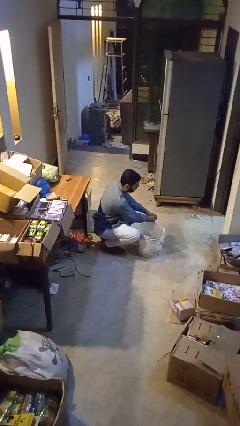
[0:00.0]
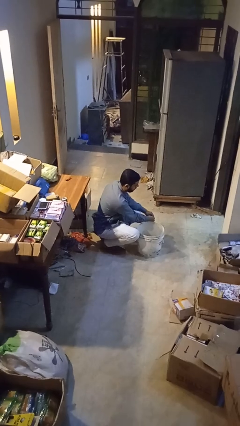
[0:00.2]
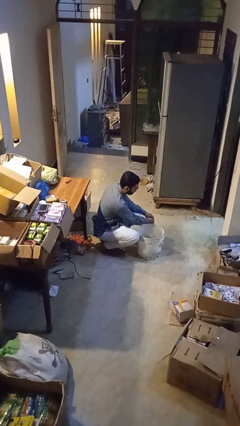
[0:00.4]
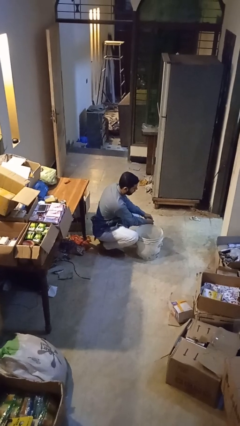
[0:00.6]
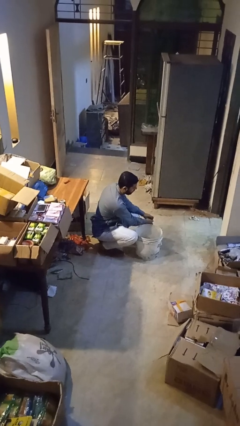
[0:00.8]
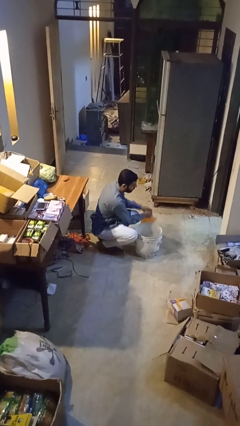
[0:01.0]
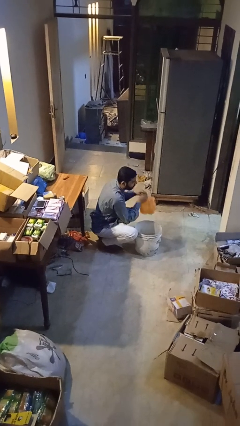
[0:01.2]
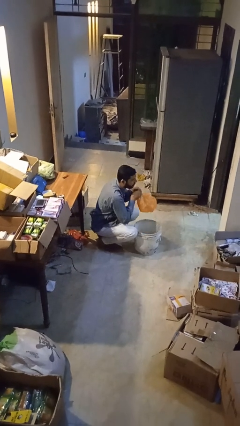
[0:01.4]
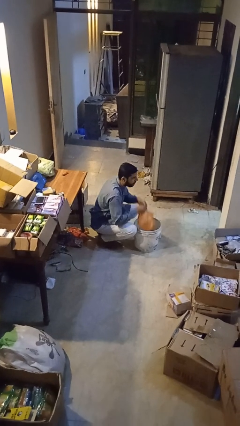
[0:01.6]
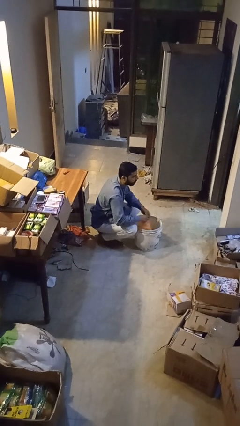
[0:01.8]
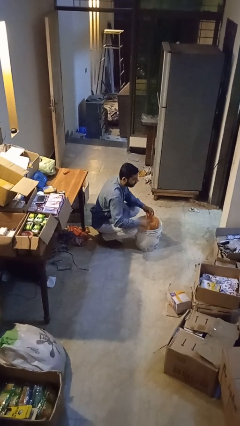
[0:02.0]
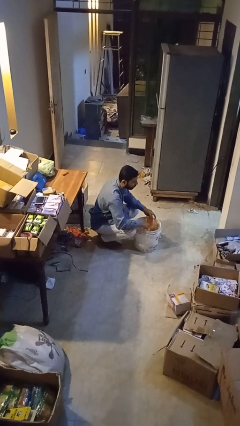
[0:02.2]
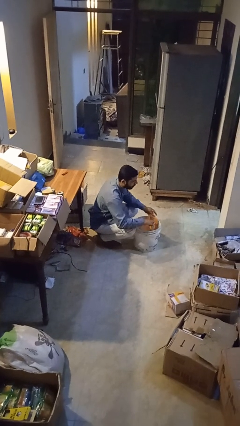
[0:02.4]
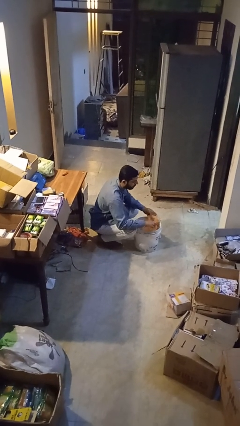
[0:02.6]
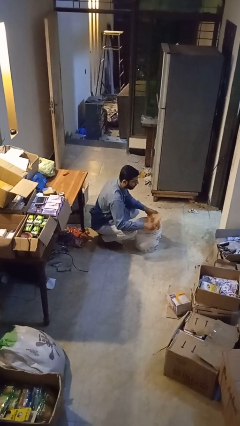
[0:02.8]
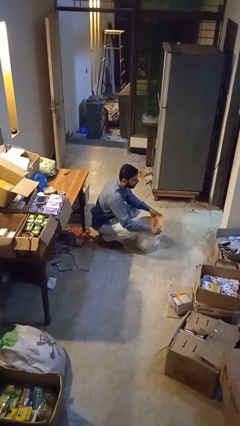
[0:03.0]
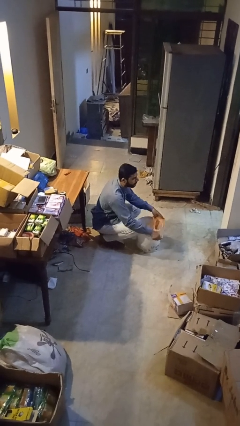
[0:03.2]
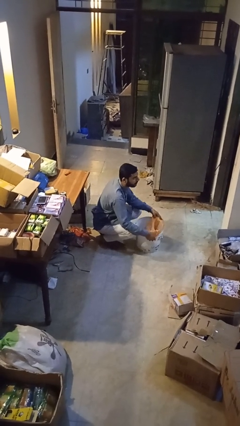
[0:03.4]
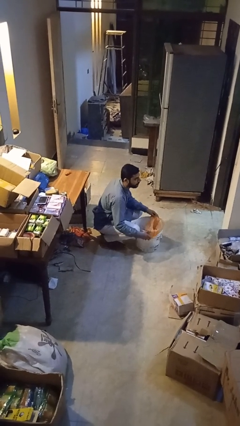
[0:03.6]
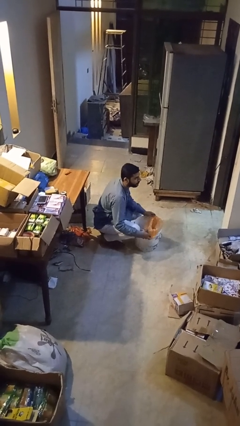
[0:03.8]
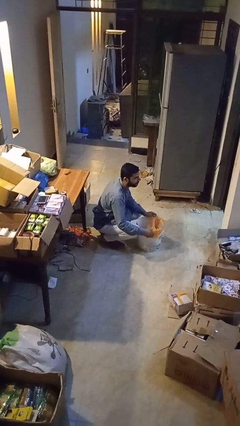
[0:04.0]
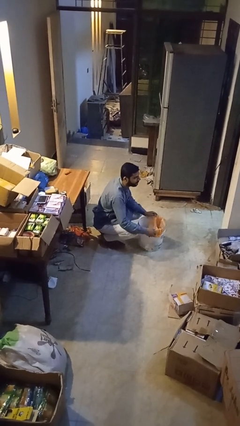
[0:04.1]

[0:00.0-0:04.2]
person inserts trashbag into trashcan

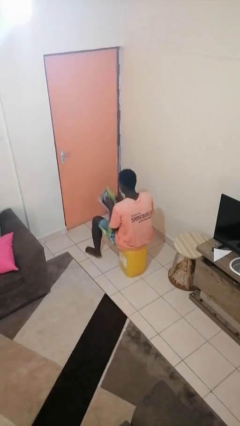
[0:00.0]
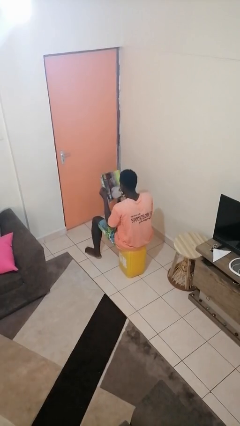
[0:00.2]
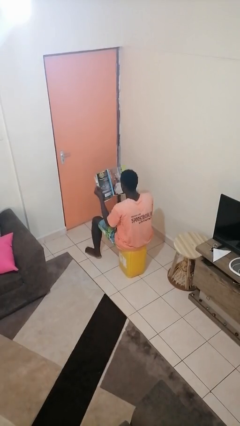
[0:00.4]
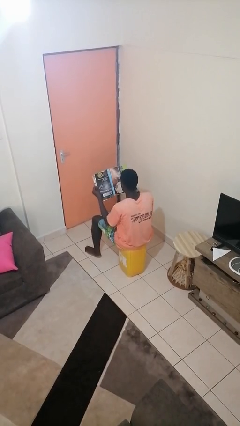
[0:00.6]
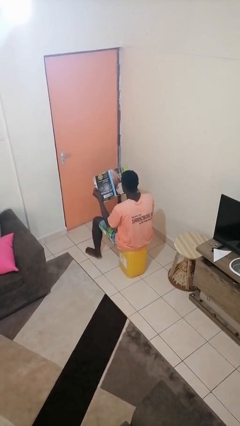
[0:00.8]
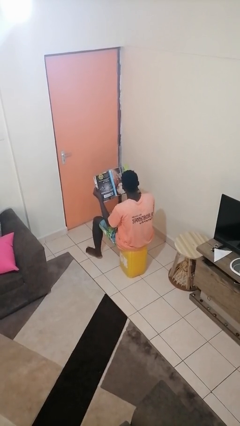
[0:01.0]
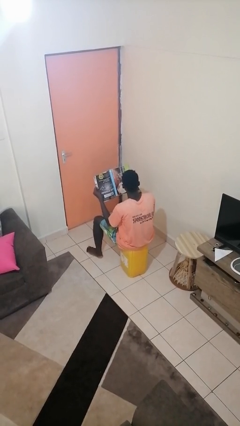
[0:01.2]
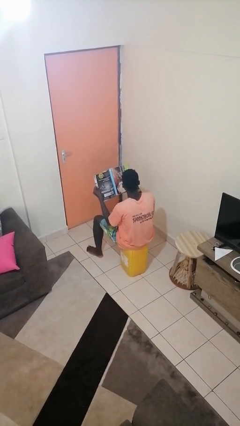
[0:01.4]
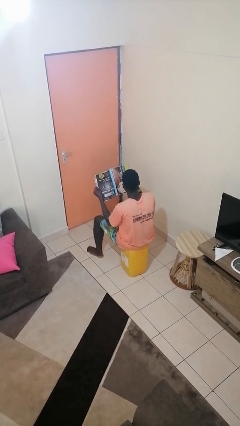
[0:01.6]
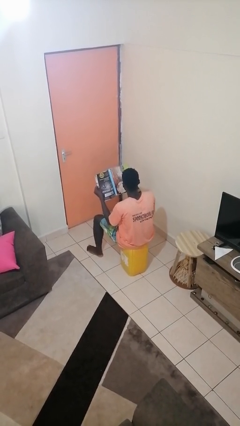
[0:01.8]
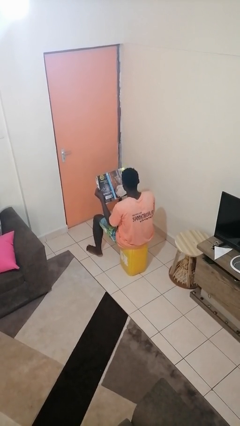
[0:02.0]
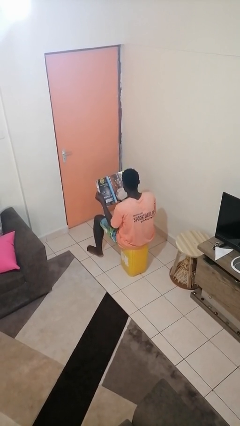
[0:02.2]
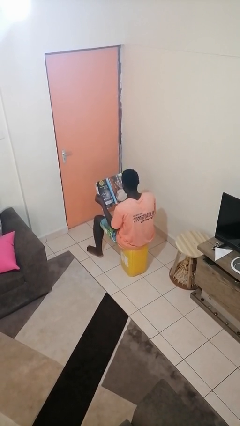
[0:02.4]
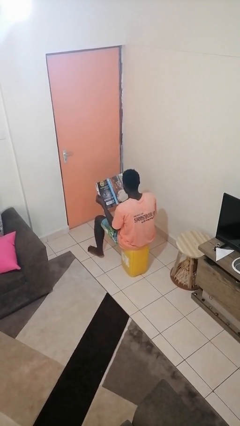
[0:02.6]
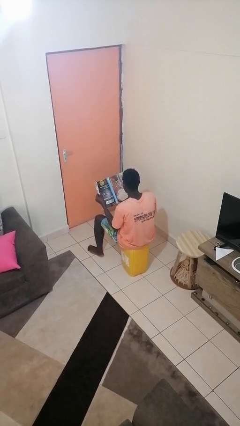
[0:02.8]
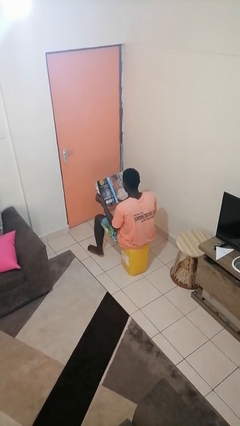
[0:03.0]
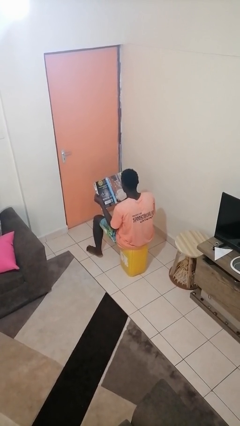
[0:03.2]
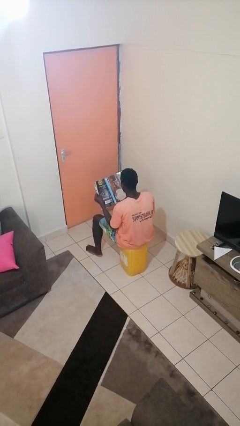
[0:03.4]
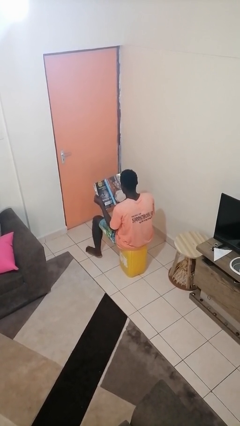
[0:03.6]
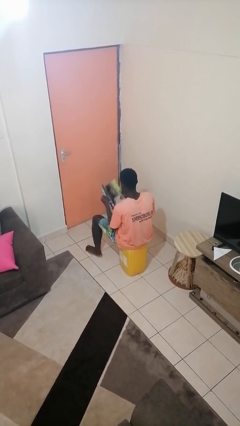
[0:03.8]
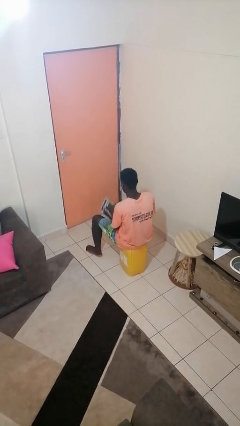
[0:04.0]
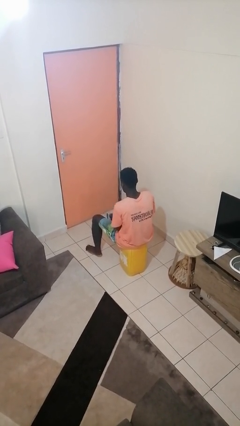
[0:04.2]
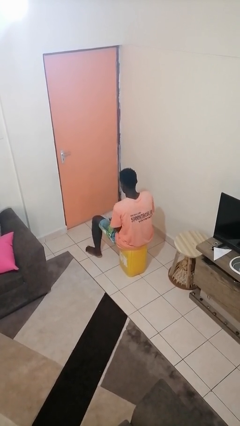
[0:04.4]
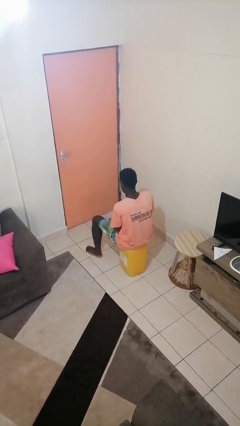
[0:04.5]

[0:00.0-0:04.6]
person reads magazine

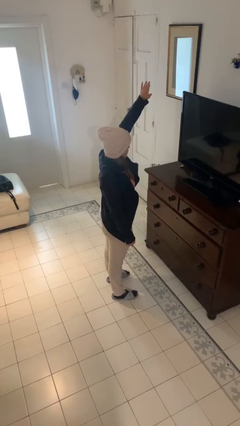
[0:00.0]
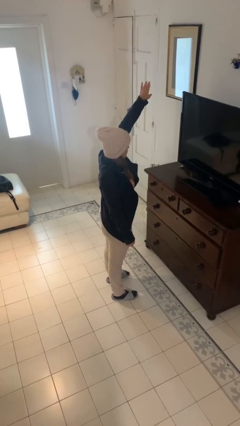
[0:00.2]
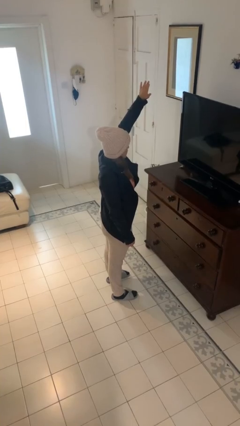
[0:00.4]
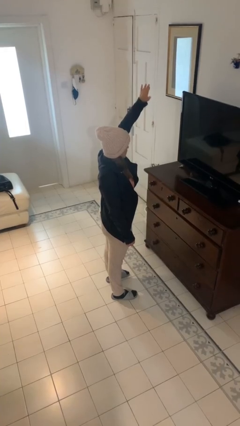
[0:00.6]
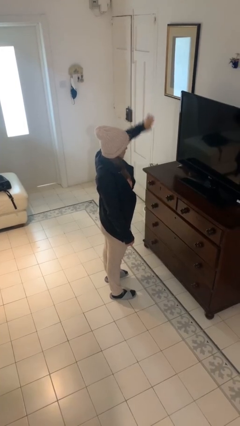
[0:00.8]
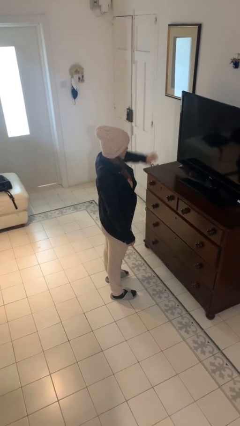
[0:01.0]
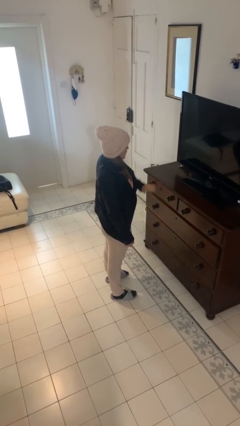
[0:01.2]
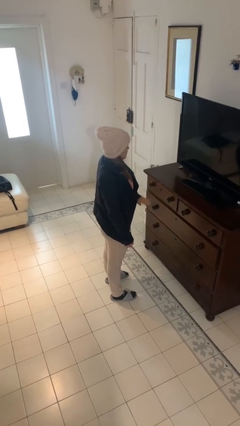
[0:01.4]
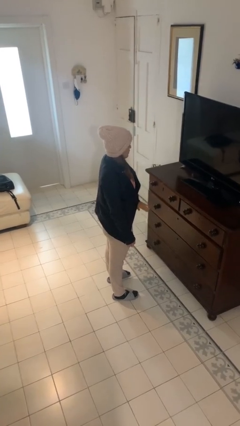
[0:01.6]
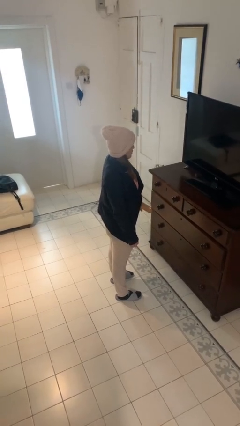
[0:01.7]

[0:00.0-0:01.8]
person gestures swipe down

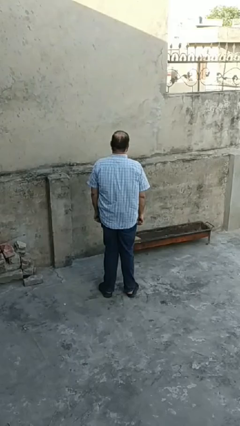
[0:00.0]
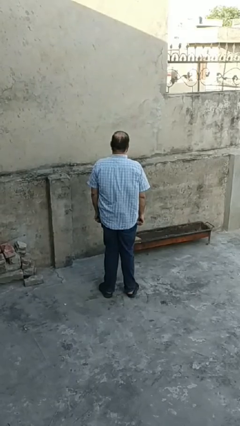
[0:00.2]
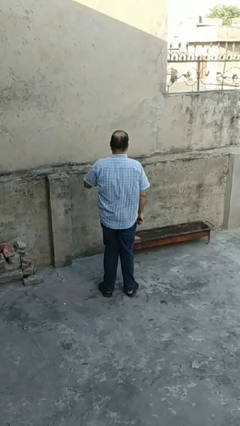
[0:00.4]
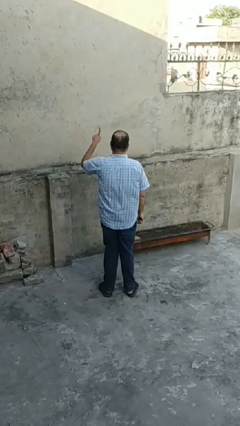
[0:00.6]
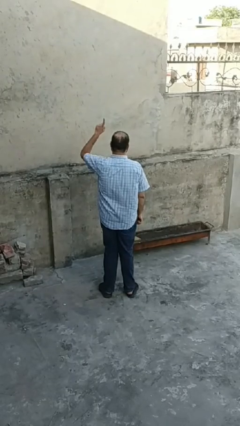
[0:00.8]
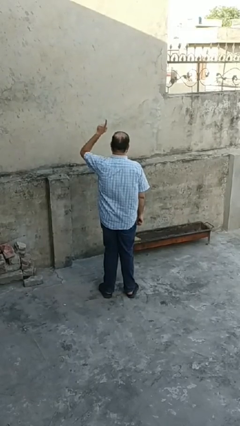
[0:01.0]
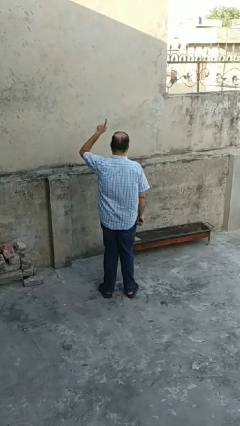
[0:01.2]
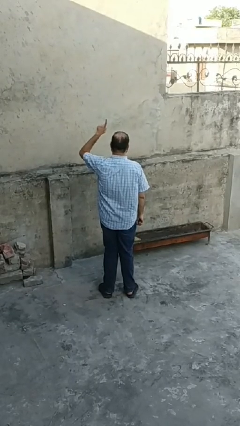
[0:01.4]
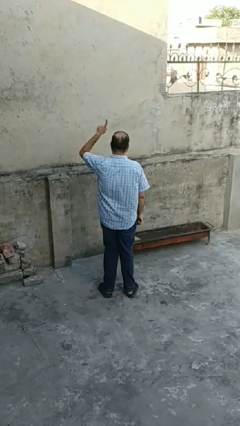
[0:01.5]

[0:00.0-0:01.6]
person gestures number one

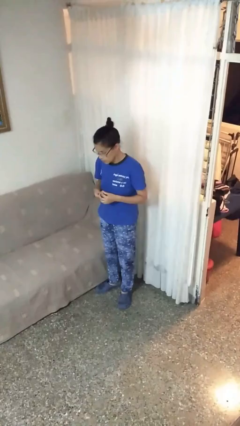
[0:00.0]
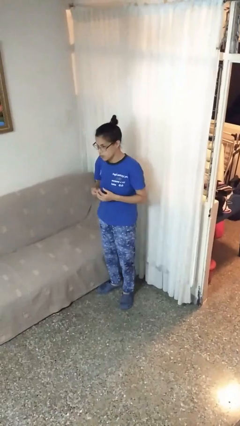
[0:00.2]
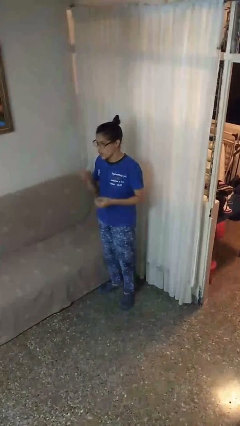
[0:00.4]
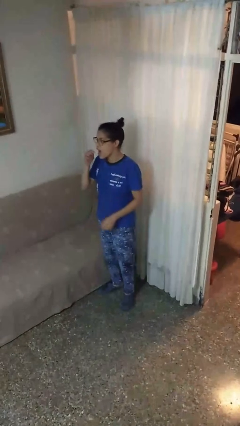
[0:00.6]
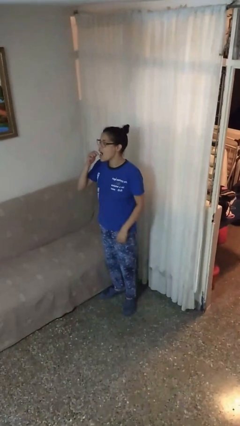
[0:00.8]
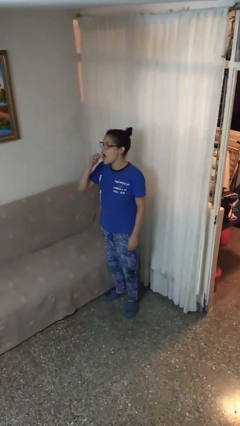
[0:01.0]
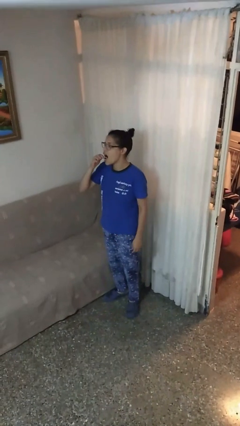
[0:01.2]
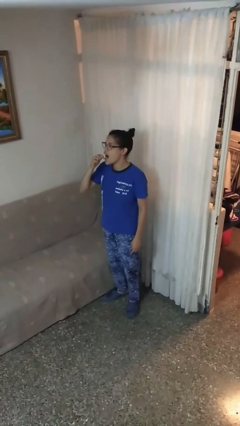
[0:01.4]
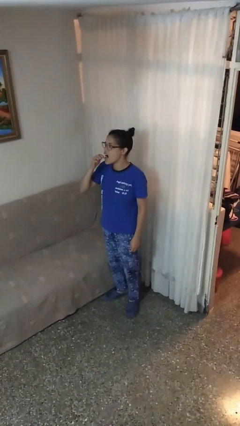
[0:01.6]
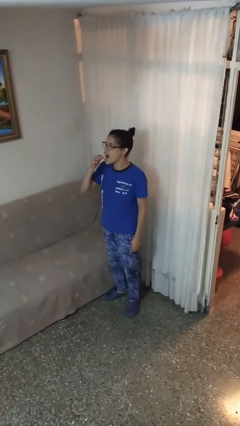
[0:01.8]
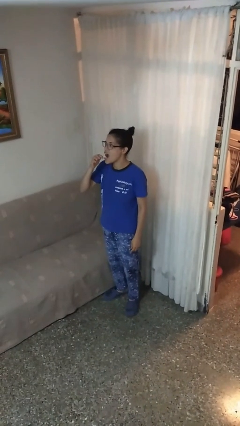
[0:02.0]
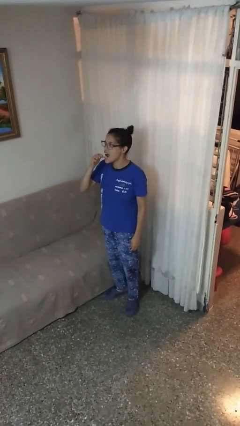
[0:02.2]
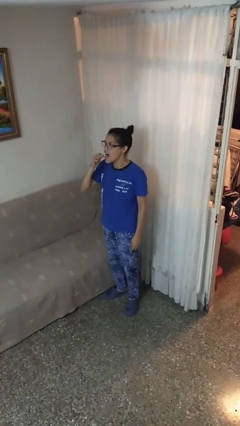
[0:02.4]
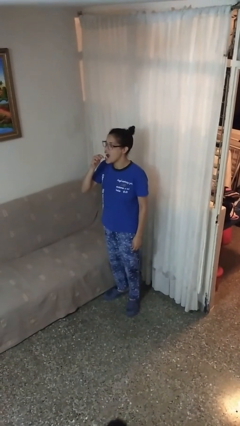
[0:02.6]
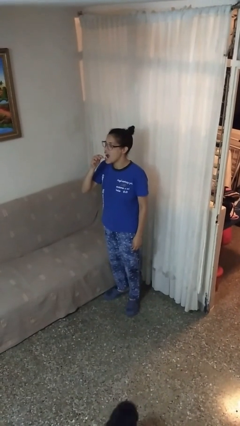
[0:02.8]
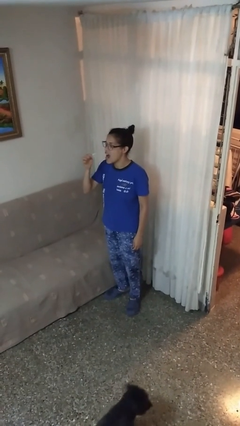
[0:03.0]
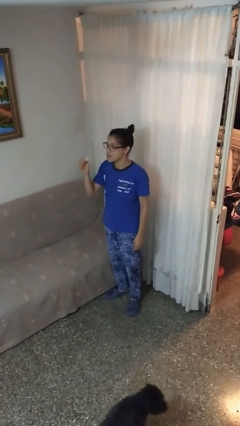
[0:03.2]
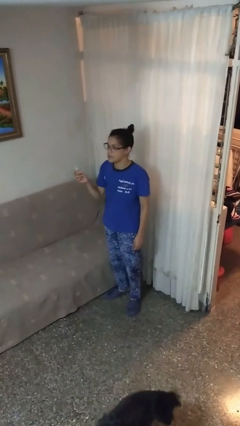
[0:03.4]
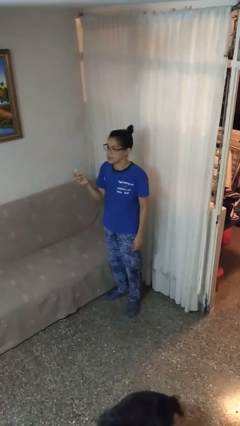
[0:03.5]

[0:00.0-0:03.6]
person flosses

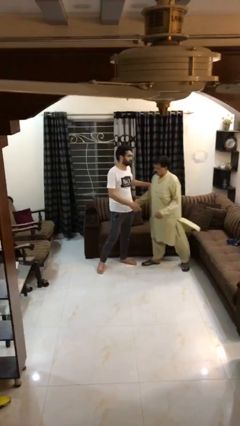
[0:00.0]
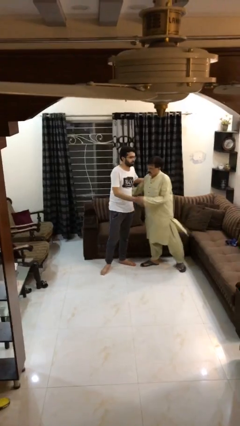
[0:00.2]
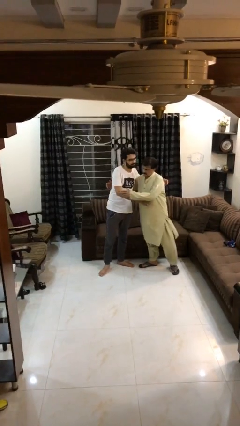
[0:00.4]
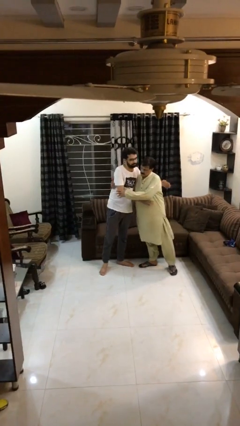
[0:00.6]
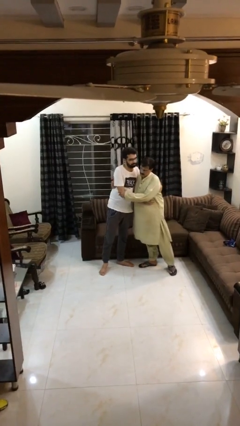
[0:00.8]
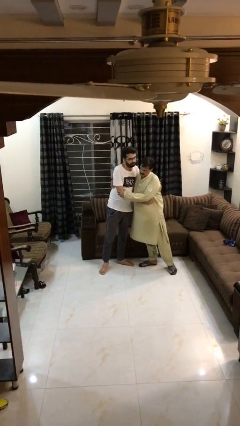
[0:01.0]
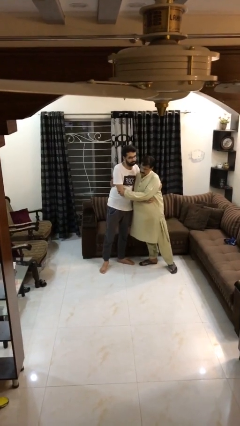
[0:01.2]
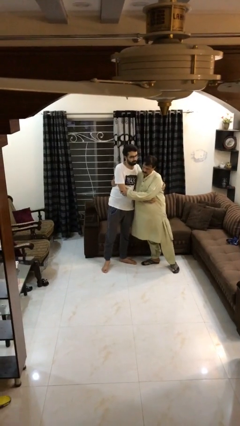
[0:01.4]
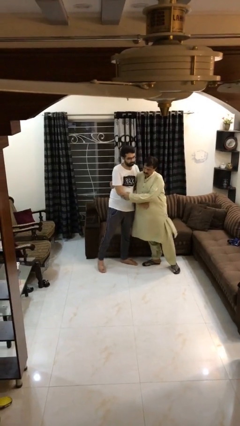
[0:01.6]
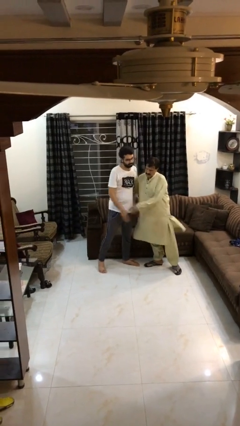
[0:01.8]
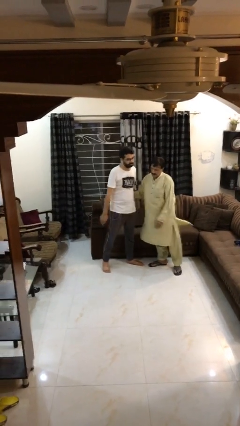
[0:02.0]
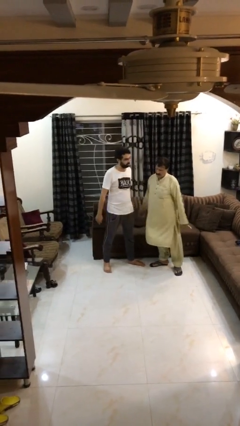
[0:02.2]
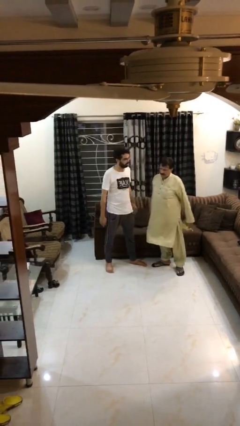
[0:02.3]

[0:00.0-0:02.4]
person embraces person
